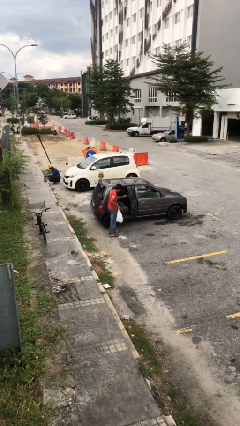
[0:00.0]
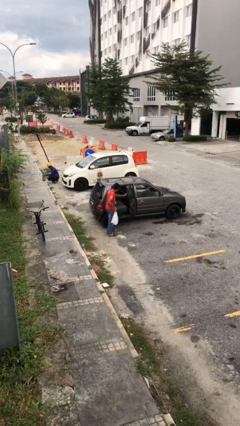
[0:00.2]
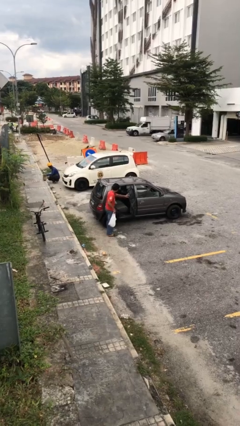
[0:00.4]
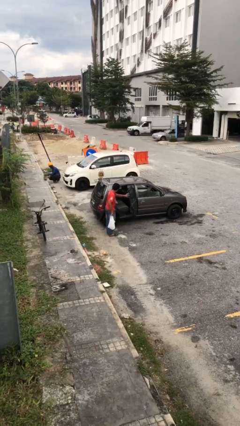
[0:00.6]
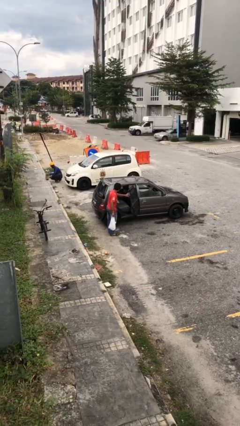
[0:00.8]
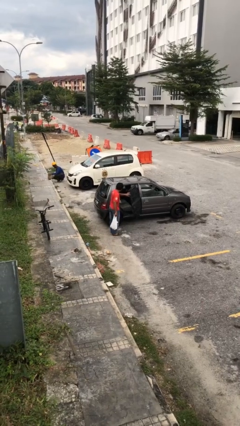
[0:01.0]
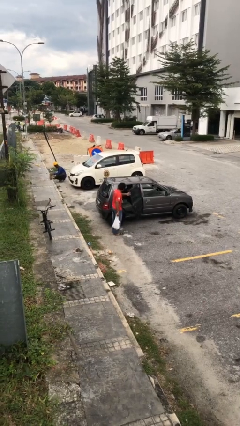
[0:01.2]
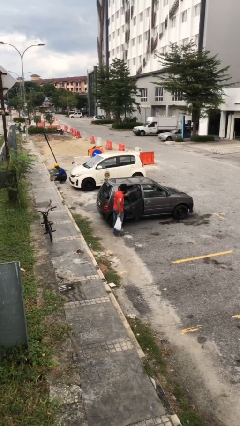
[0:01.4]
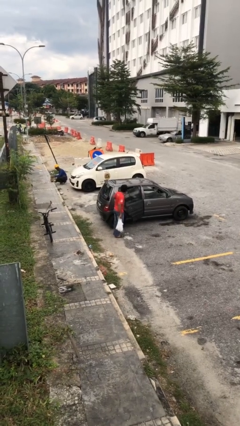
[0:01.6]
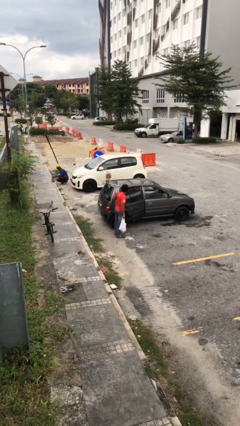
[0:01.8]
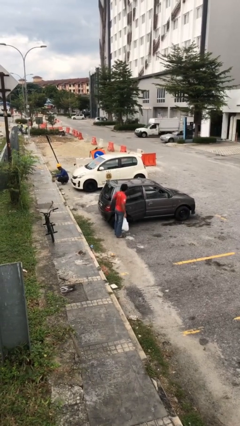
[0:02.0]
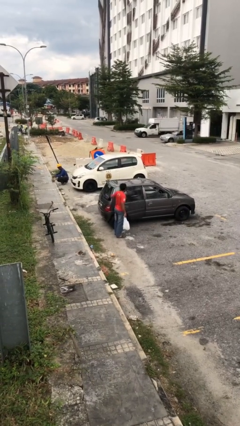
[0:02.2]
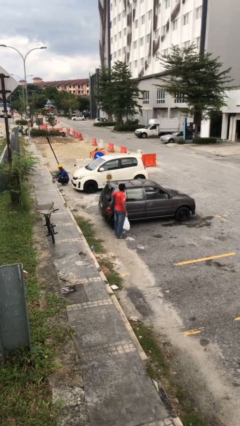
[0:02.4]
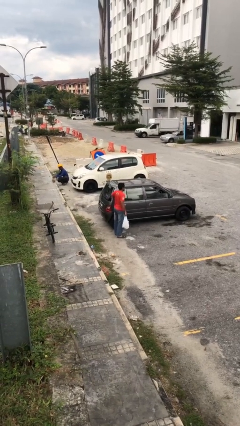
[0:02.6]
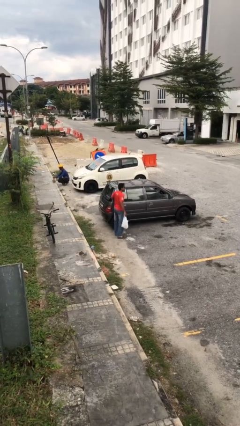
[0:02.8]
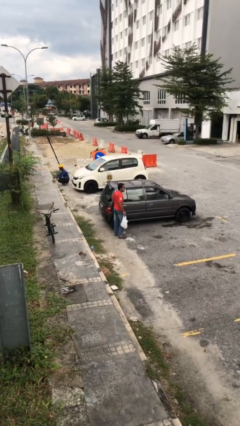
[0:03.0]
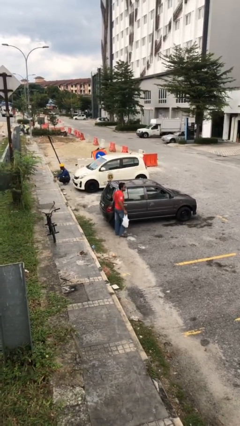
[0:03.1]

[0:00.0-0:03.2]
person closes car door

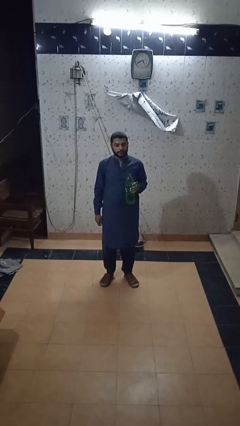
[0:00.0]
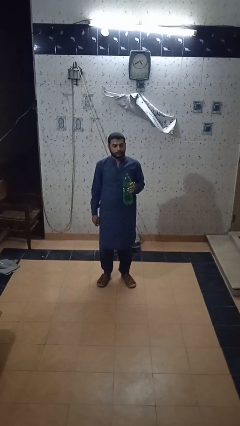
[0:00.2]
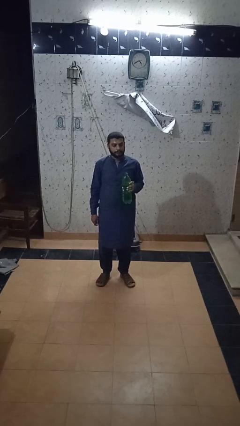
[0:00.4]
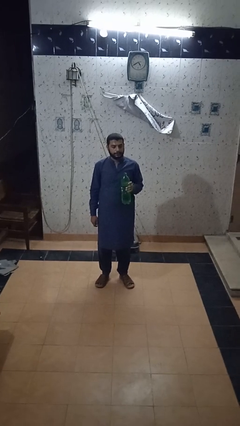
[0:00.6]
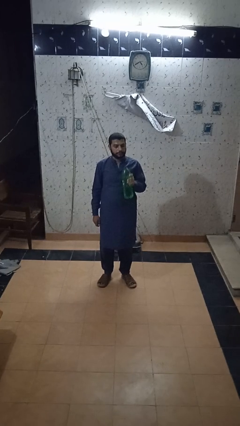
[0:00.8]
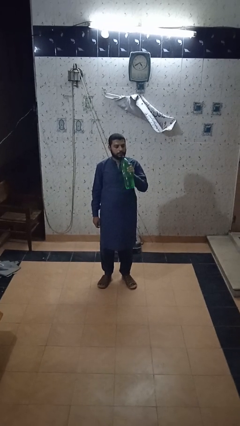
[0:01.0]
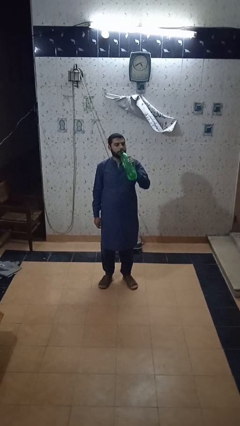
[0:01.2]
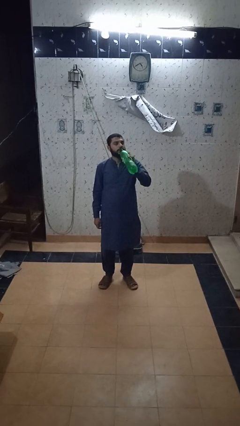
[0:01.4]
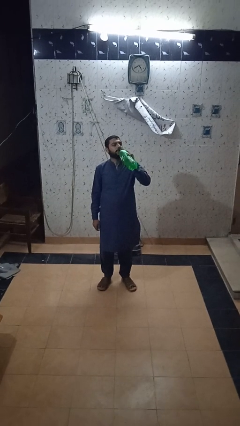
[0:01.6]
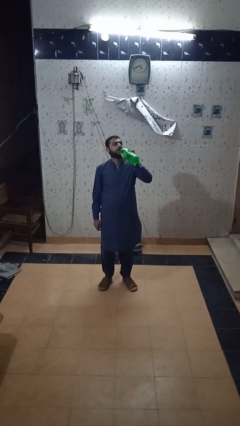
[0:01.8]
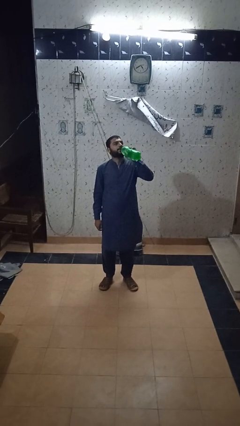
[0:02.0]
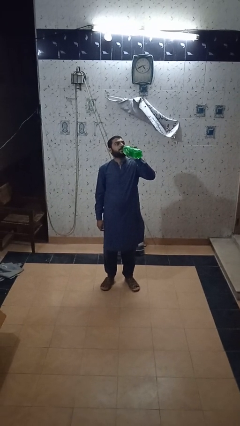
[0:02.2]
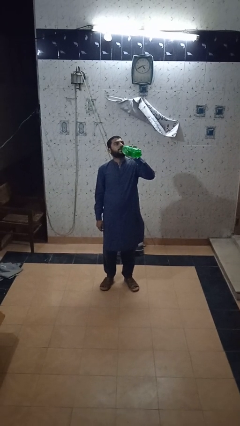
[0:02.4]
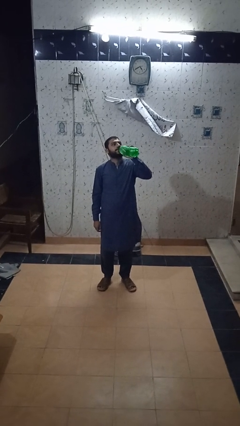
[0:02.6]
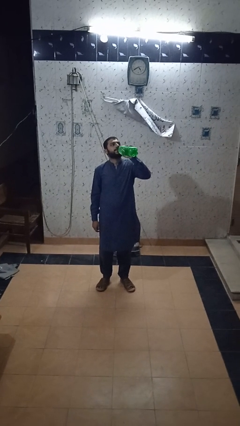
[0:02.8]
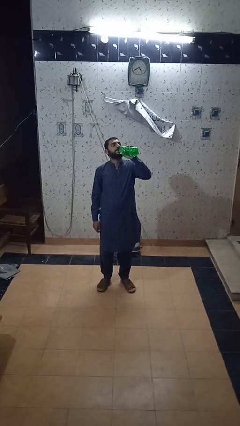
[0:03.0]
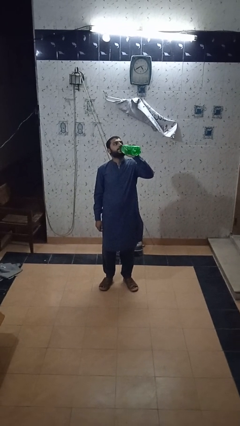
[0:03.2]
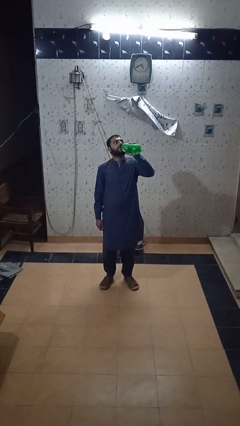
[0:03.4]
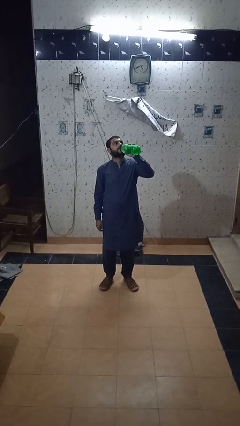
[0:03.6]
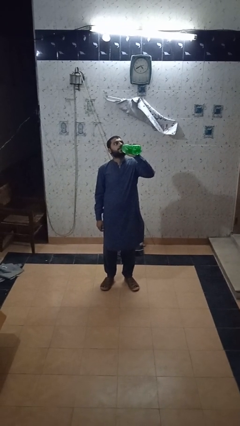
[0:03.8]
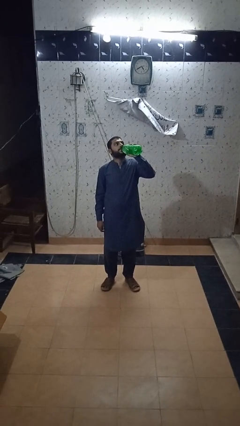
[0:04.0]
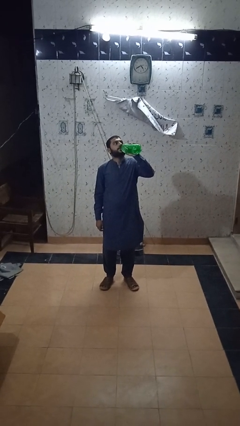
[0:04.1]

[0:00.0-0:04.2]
person drinks from bottle

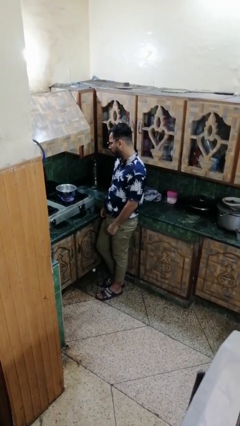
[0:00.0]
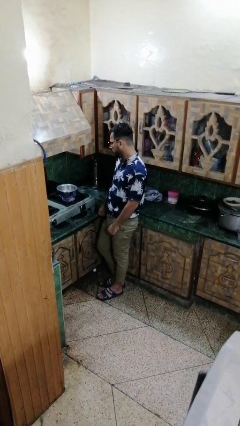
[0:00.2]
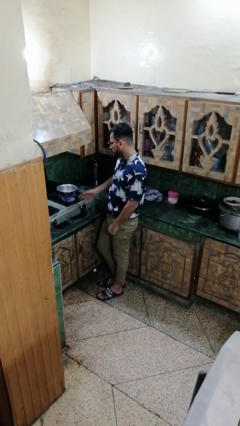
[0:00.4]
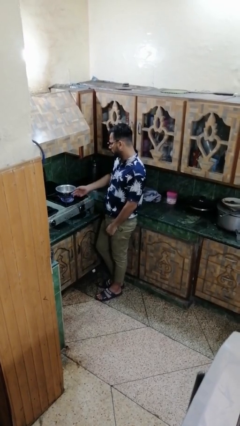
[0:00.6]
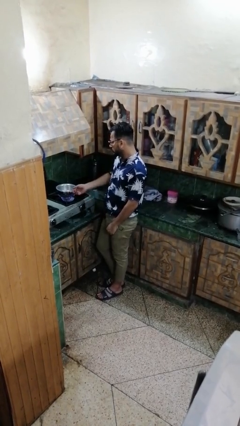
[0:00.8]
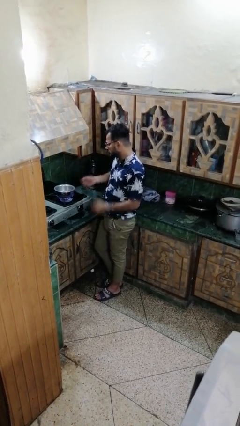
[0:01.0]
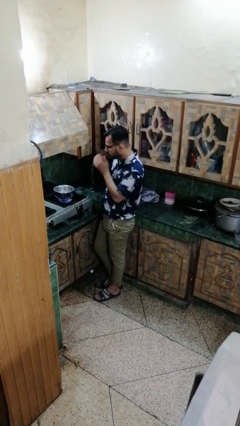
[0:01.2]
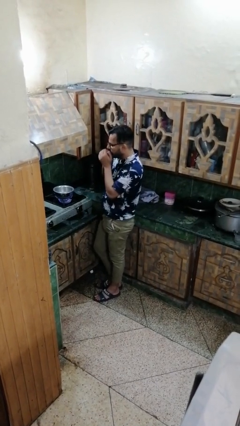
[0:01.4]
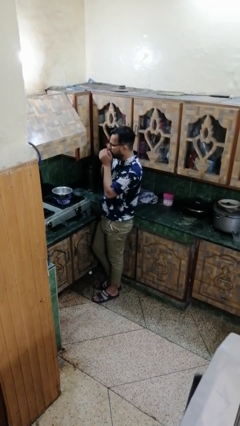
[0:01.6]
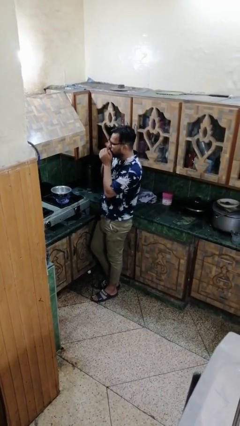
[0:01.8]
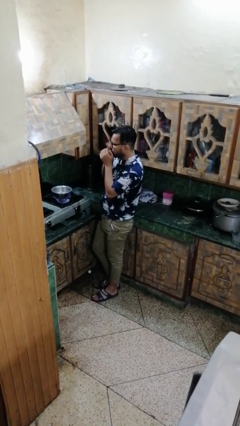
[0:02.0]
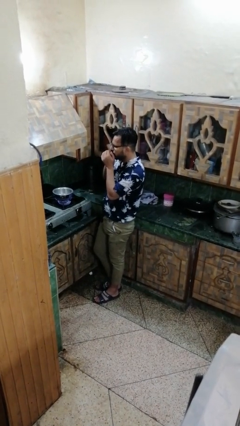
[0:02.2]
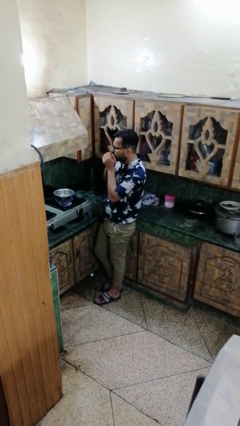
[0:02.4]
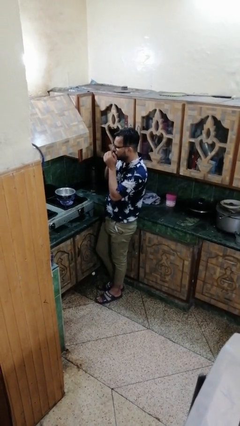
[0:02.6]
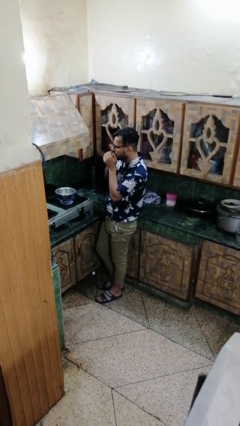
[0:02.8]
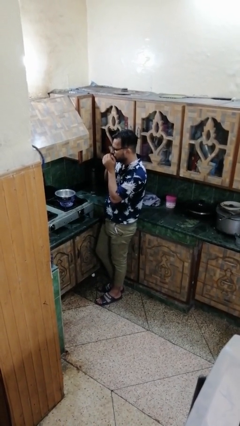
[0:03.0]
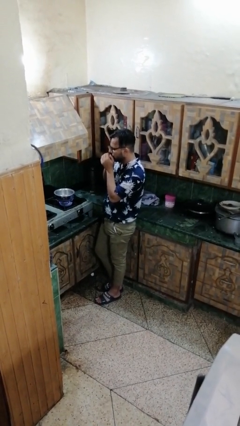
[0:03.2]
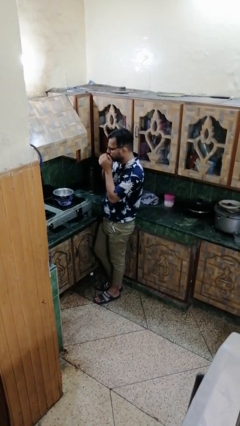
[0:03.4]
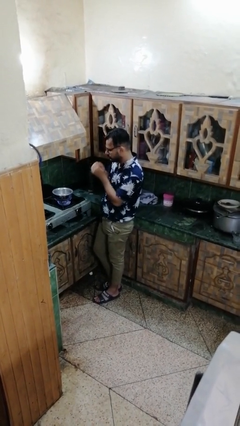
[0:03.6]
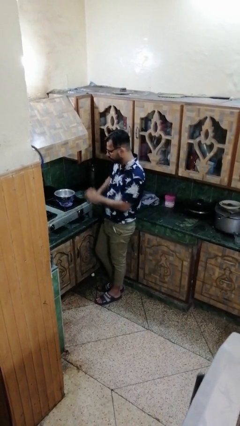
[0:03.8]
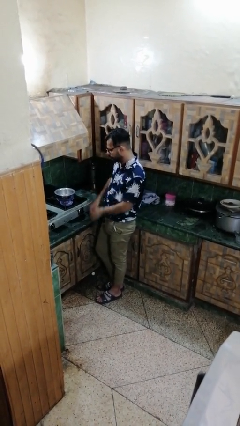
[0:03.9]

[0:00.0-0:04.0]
person burns hand

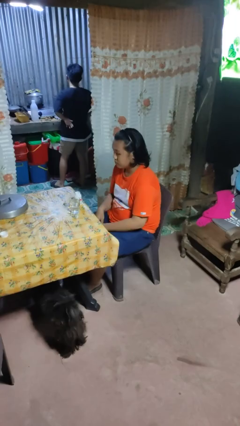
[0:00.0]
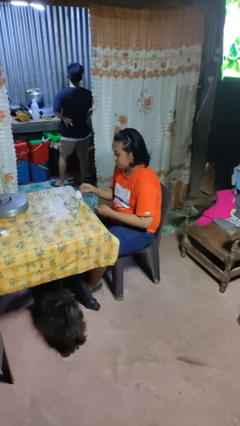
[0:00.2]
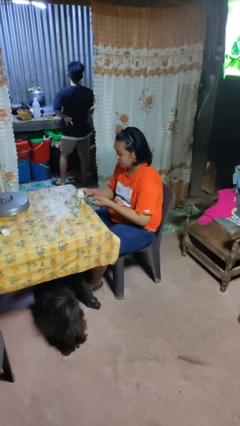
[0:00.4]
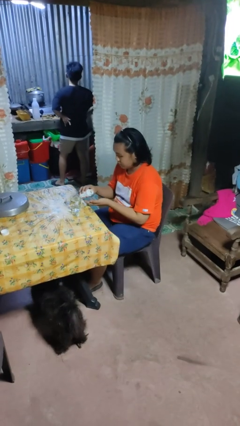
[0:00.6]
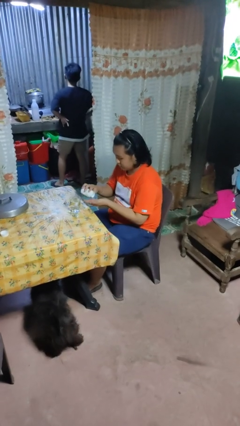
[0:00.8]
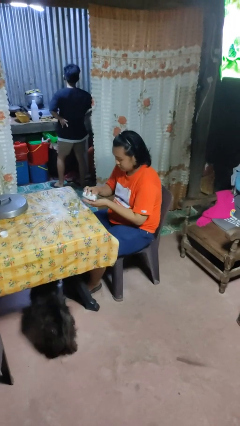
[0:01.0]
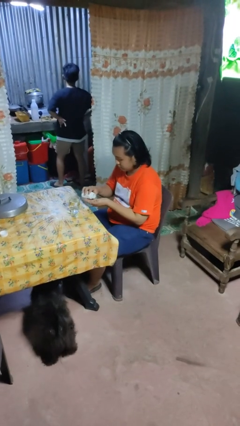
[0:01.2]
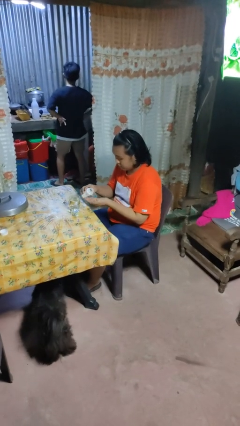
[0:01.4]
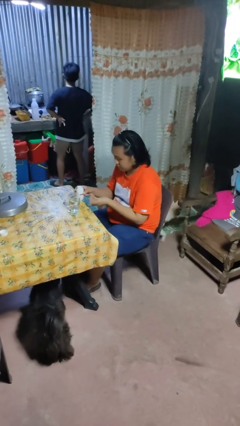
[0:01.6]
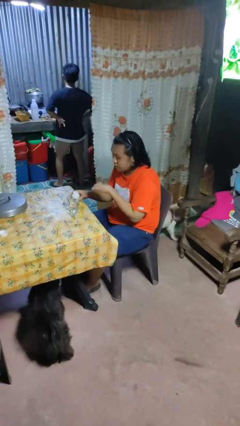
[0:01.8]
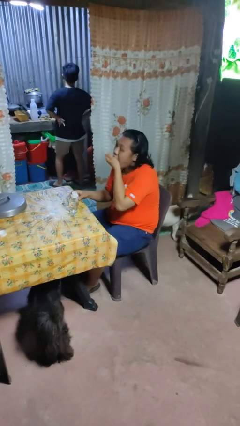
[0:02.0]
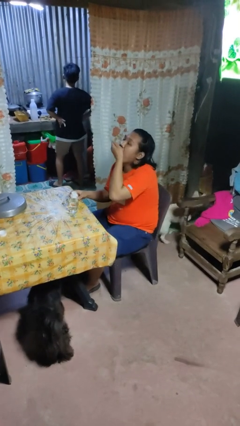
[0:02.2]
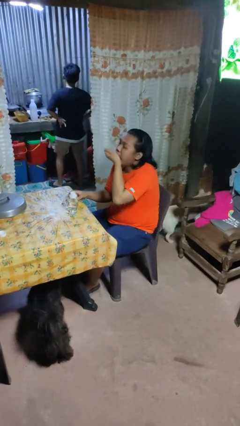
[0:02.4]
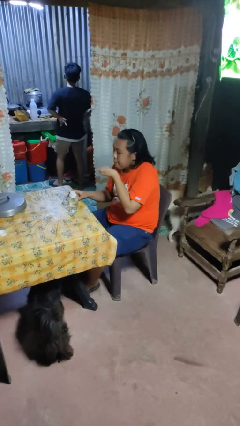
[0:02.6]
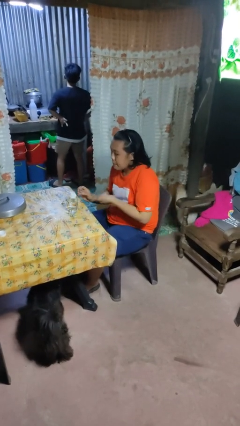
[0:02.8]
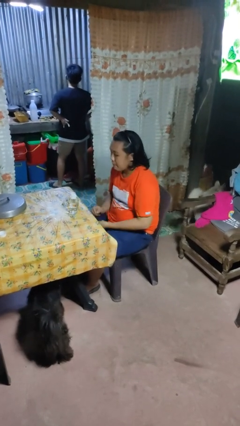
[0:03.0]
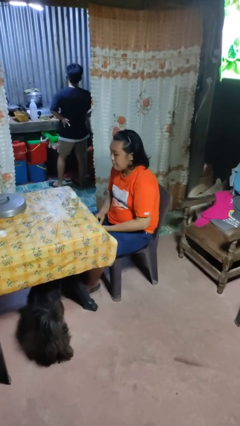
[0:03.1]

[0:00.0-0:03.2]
person takes medicine pills

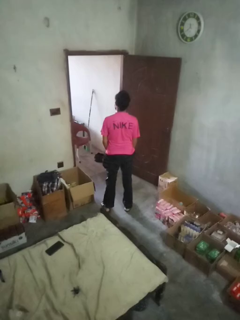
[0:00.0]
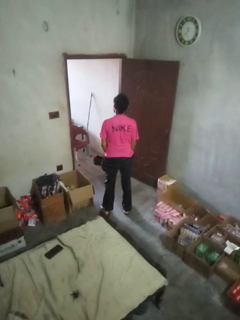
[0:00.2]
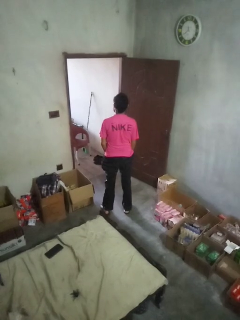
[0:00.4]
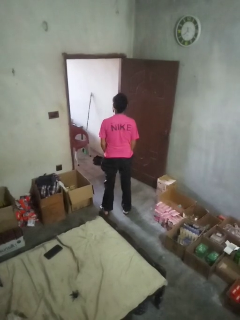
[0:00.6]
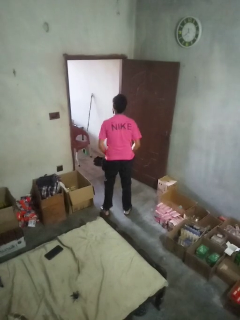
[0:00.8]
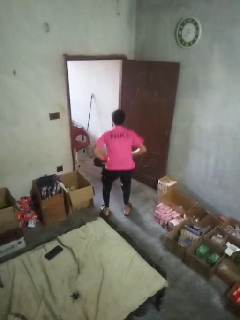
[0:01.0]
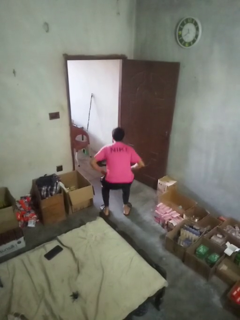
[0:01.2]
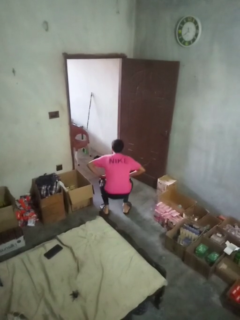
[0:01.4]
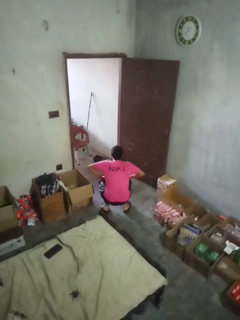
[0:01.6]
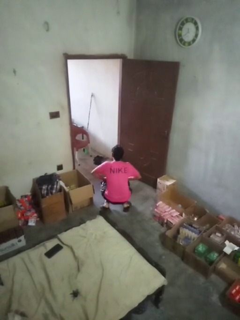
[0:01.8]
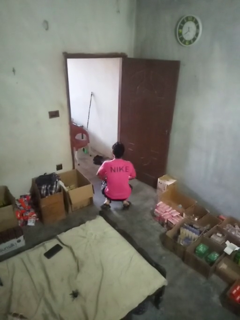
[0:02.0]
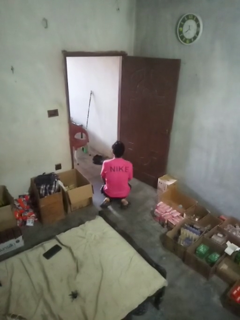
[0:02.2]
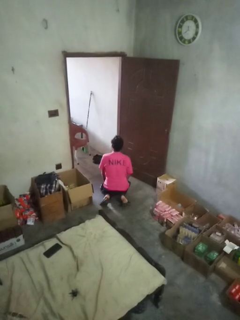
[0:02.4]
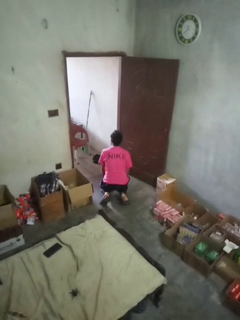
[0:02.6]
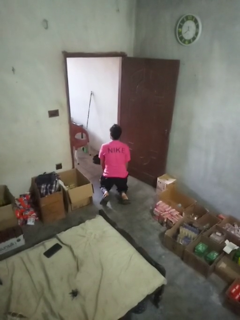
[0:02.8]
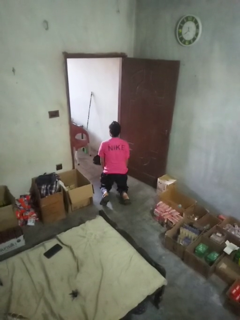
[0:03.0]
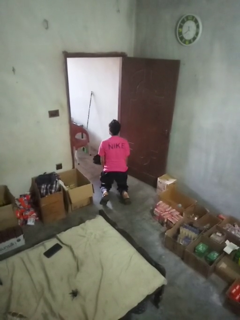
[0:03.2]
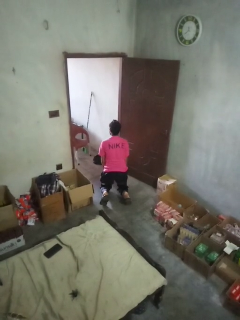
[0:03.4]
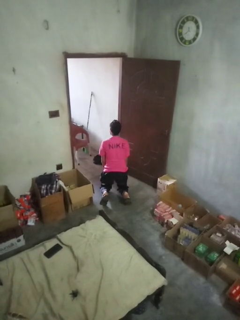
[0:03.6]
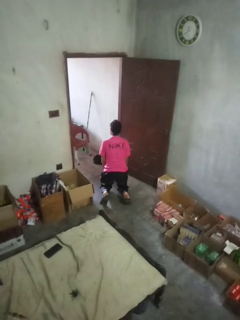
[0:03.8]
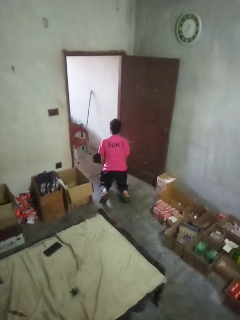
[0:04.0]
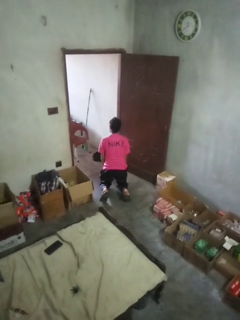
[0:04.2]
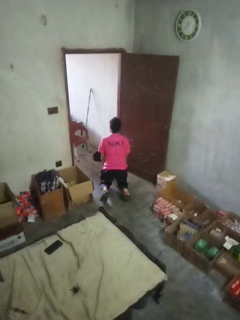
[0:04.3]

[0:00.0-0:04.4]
person kneels
